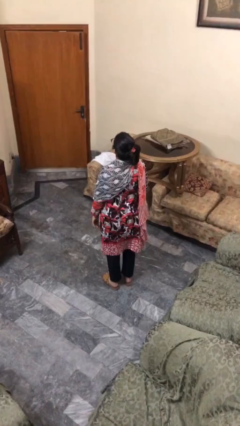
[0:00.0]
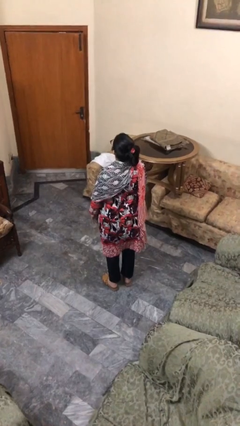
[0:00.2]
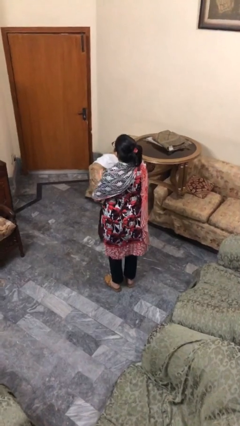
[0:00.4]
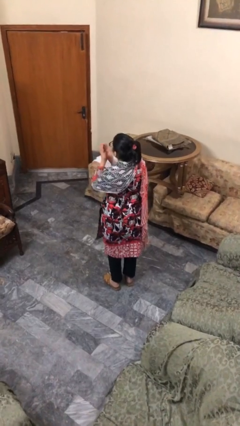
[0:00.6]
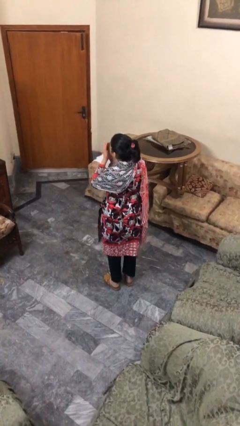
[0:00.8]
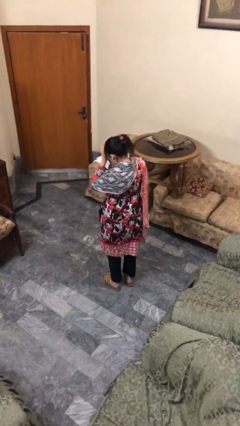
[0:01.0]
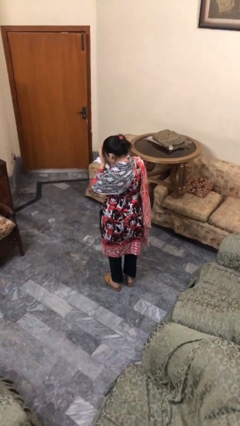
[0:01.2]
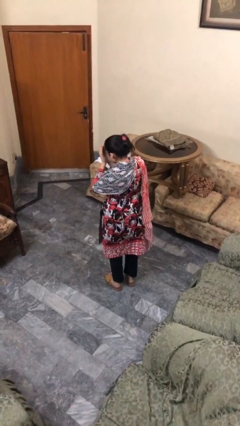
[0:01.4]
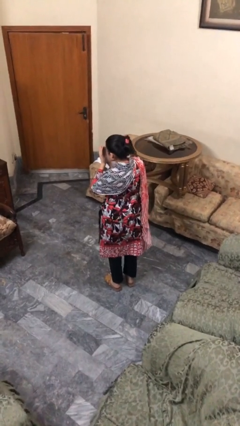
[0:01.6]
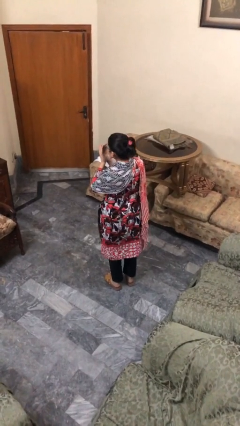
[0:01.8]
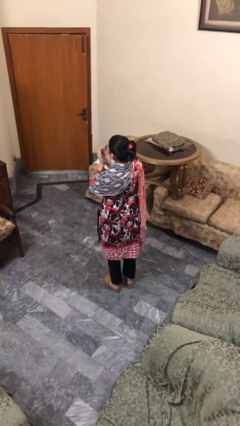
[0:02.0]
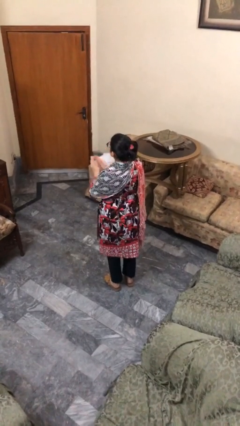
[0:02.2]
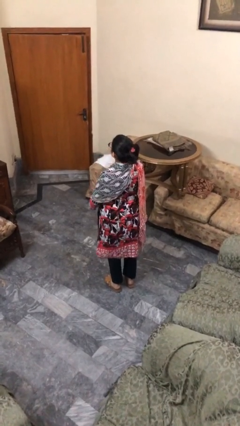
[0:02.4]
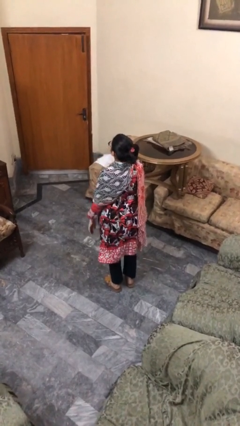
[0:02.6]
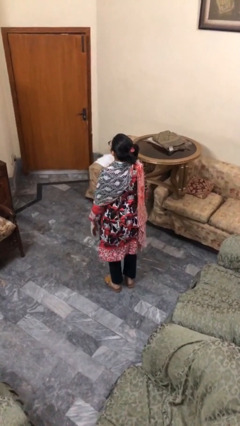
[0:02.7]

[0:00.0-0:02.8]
person sneezes into hand

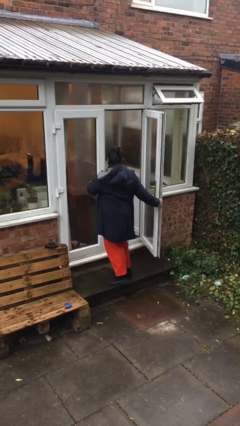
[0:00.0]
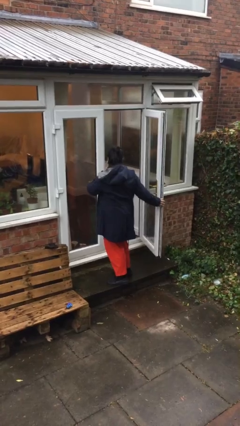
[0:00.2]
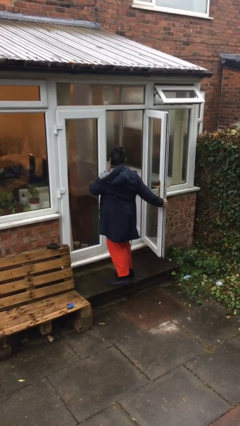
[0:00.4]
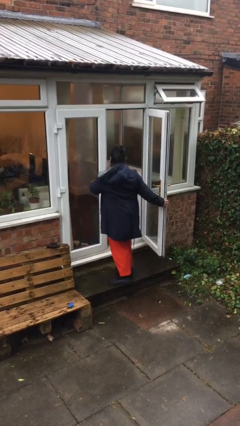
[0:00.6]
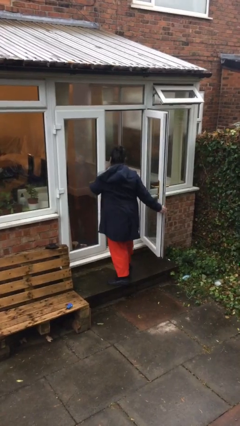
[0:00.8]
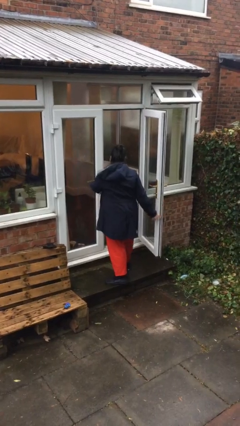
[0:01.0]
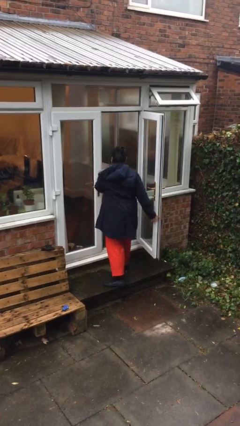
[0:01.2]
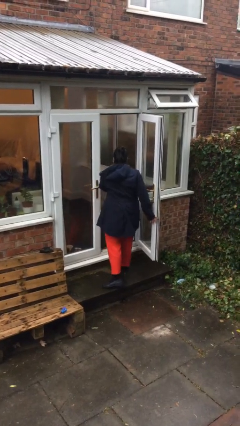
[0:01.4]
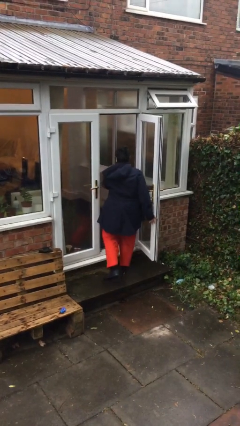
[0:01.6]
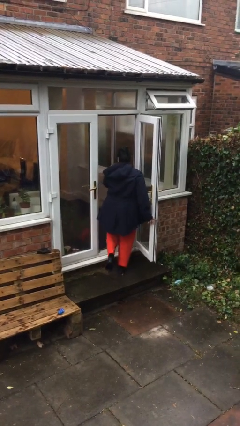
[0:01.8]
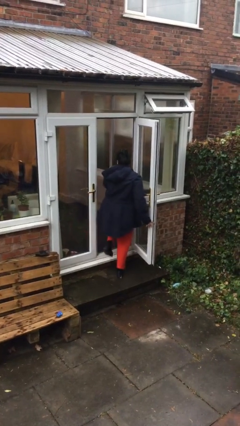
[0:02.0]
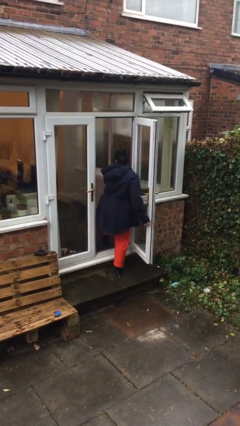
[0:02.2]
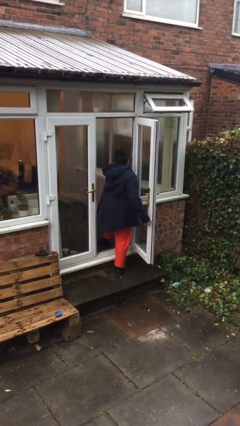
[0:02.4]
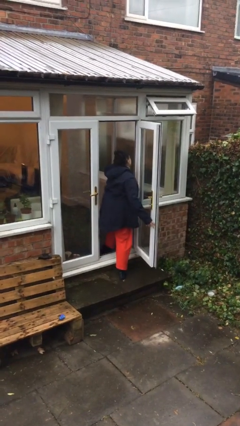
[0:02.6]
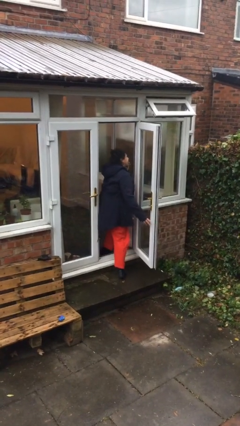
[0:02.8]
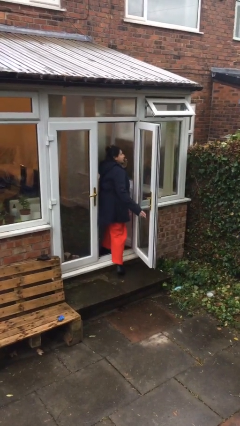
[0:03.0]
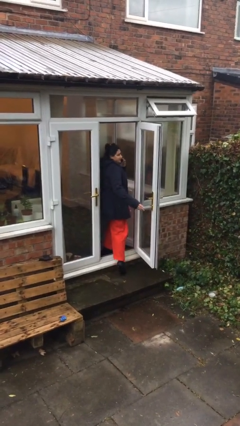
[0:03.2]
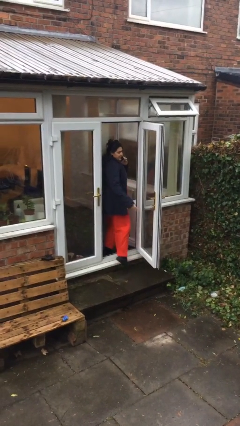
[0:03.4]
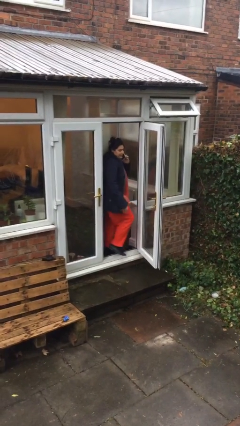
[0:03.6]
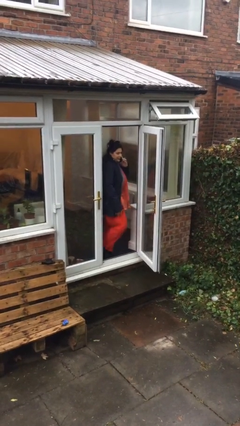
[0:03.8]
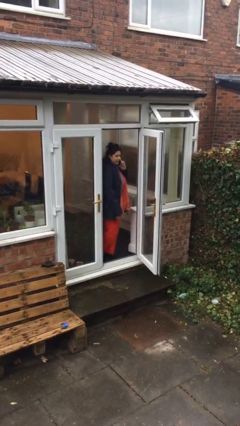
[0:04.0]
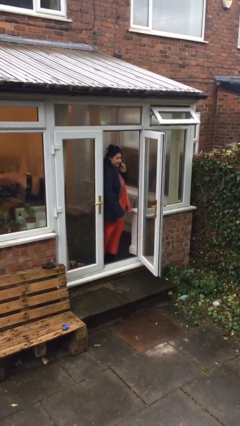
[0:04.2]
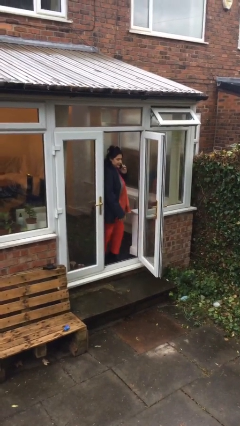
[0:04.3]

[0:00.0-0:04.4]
person exits scene through structure

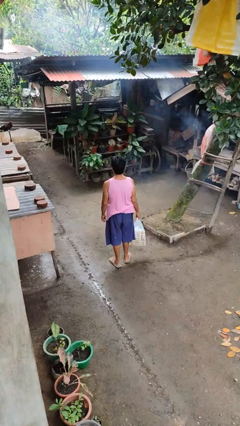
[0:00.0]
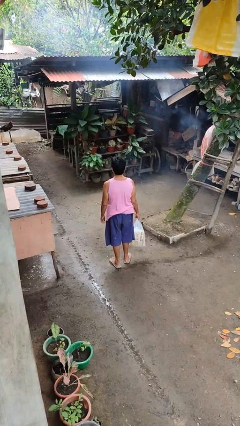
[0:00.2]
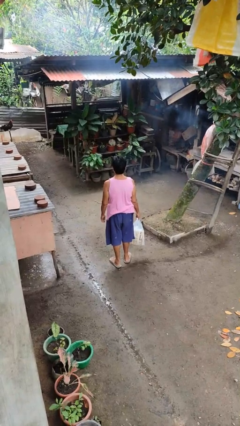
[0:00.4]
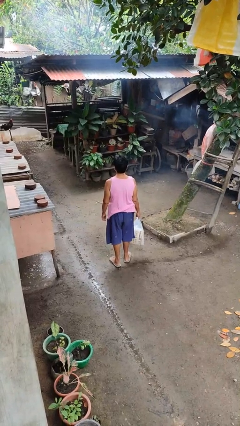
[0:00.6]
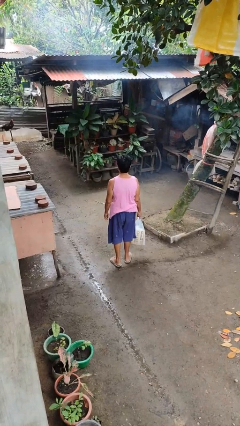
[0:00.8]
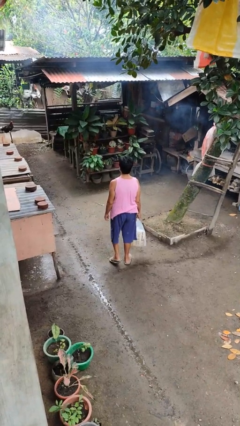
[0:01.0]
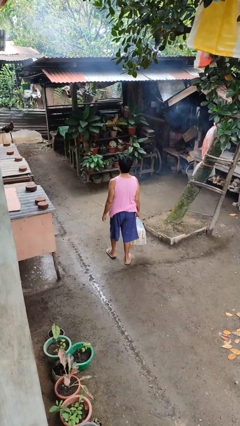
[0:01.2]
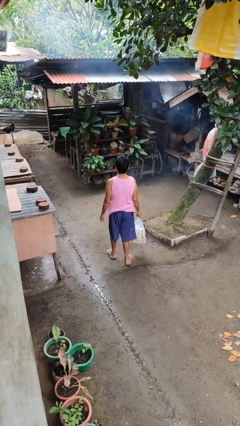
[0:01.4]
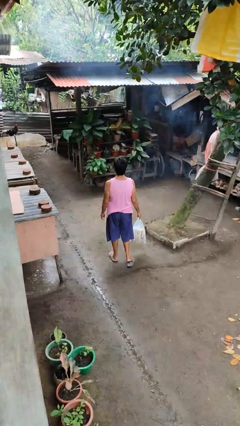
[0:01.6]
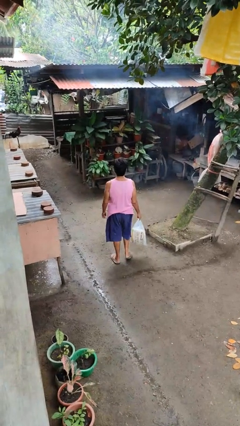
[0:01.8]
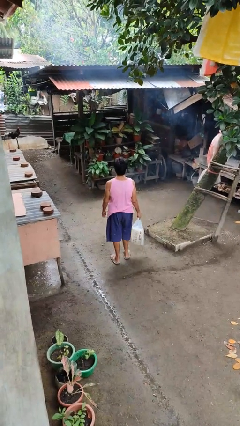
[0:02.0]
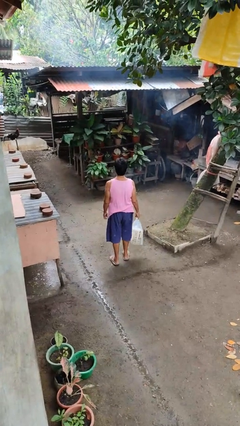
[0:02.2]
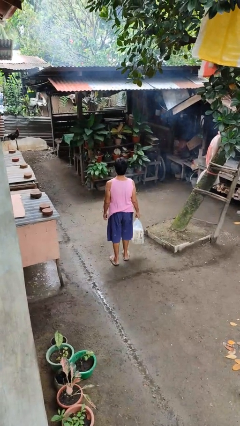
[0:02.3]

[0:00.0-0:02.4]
person carries groceries

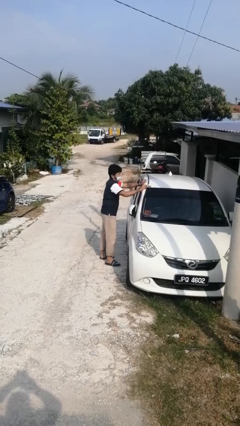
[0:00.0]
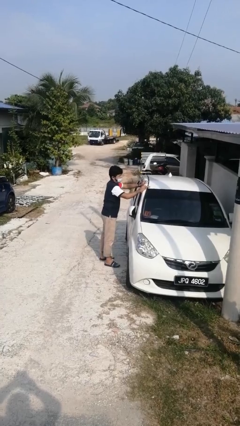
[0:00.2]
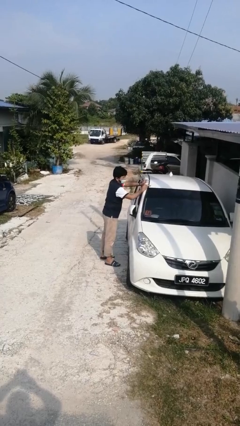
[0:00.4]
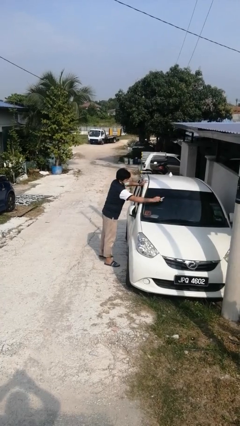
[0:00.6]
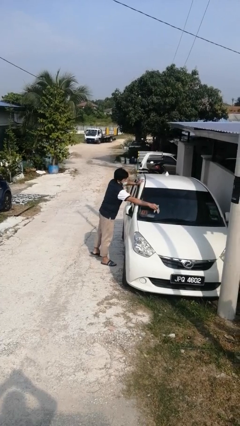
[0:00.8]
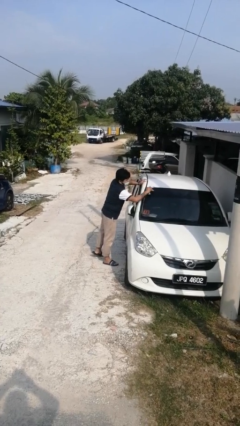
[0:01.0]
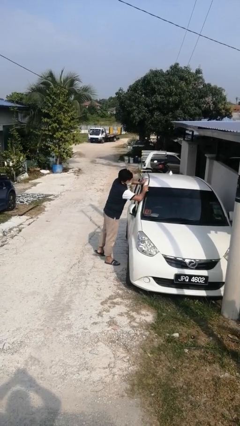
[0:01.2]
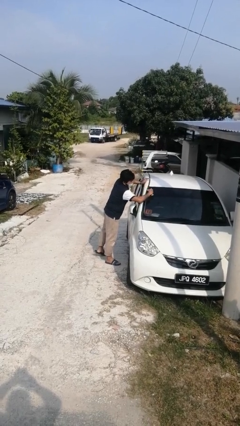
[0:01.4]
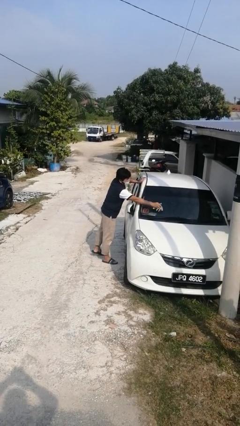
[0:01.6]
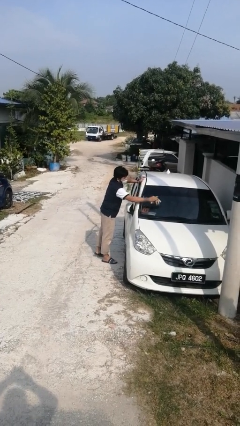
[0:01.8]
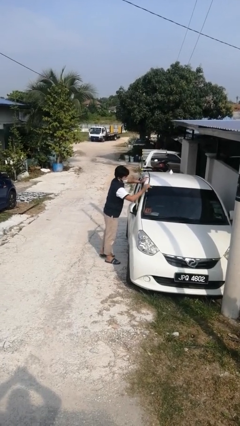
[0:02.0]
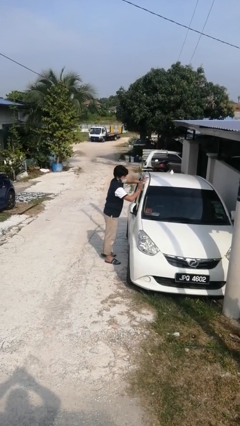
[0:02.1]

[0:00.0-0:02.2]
person polishes car with rag

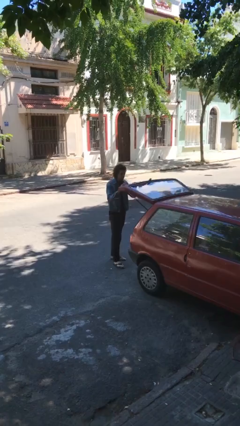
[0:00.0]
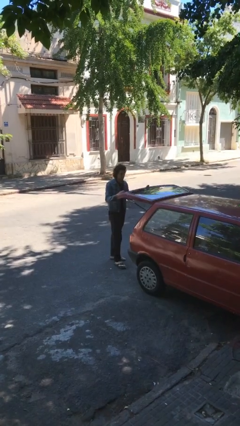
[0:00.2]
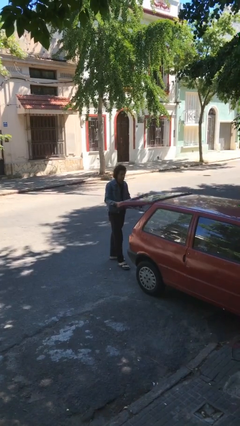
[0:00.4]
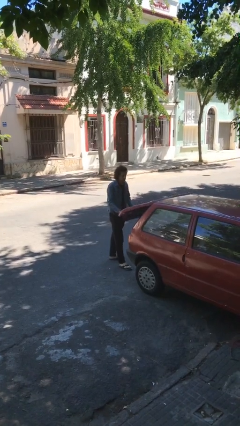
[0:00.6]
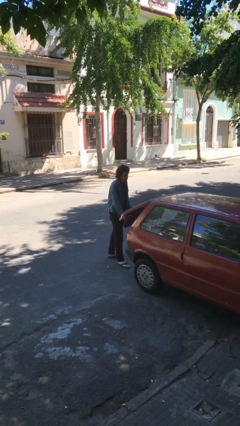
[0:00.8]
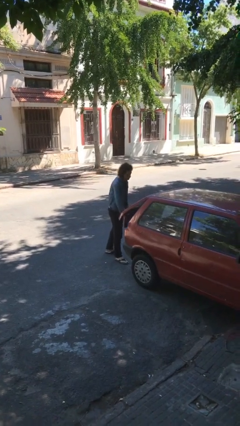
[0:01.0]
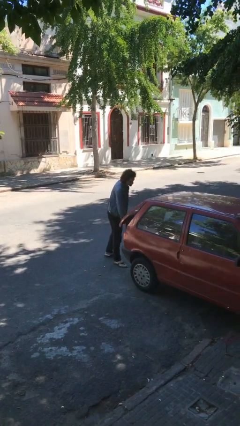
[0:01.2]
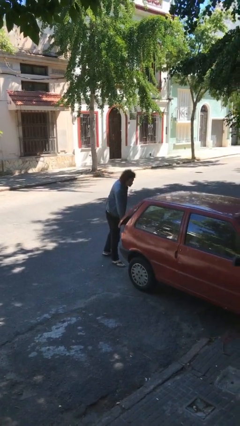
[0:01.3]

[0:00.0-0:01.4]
person closes car trunk

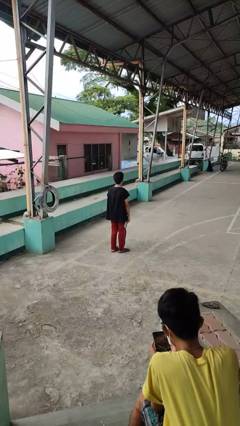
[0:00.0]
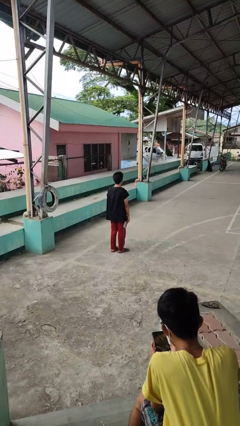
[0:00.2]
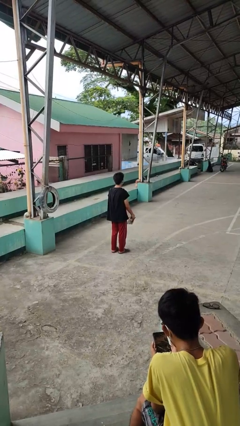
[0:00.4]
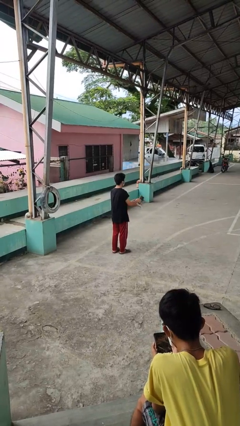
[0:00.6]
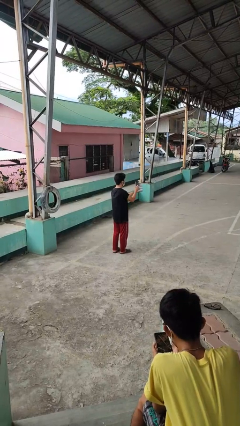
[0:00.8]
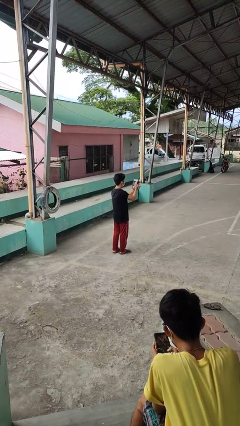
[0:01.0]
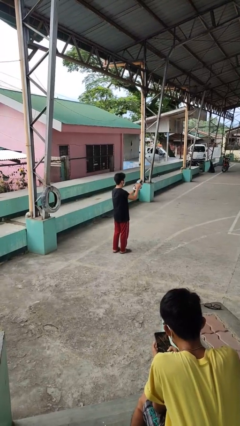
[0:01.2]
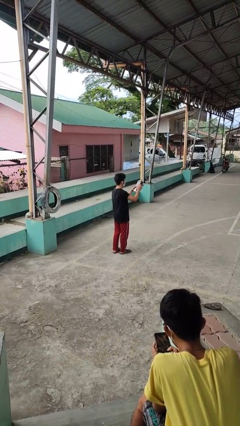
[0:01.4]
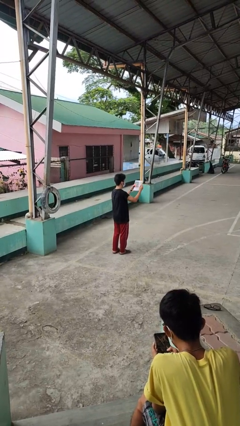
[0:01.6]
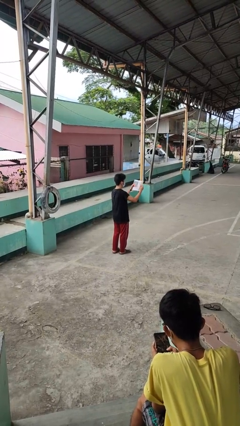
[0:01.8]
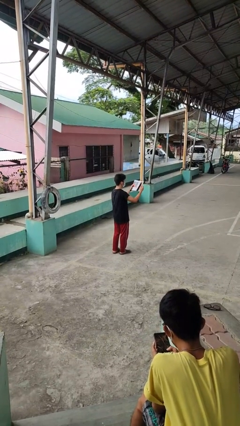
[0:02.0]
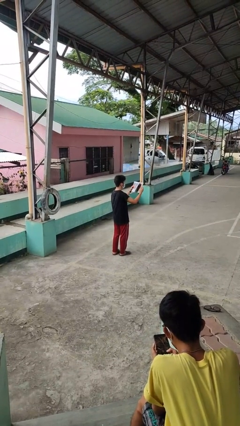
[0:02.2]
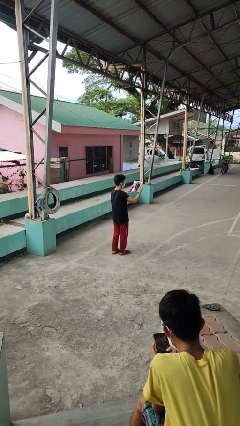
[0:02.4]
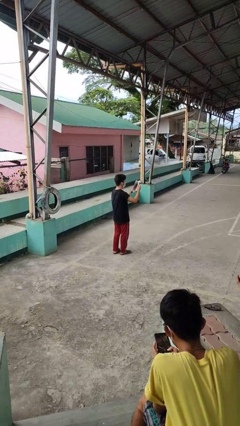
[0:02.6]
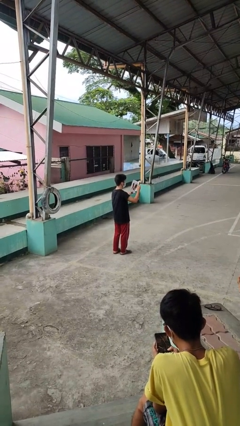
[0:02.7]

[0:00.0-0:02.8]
person reads magazine

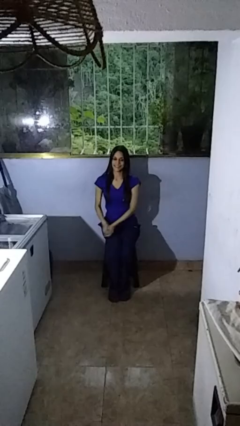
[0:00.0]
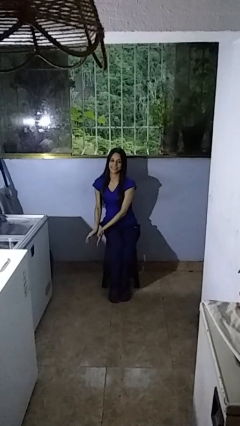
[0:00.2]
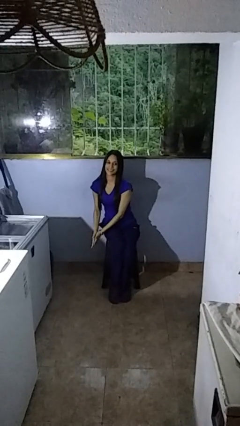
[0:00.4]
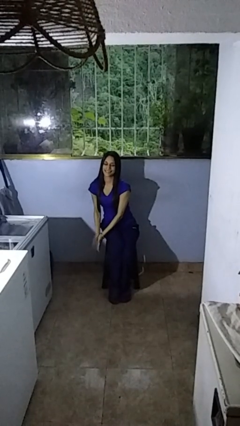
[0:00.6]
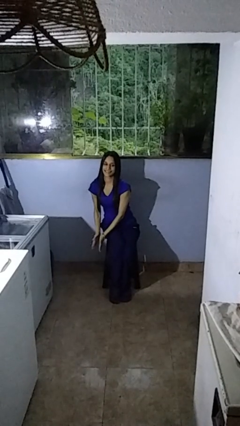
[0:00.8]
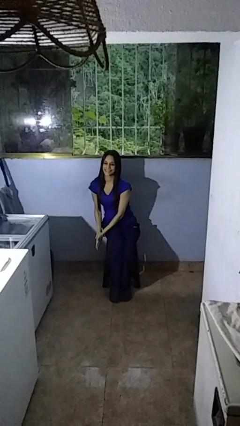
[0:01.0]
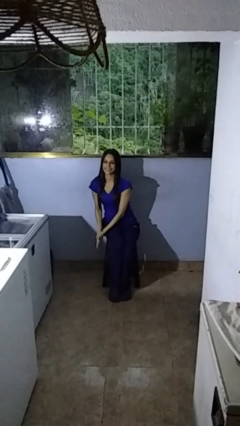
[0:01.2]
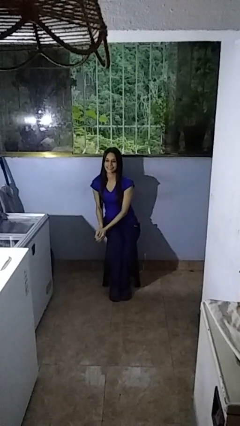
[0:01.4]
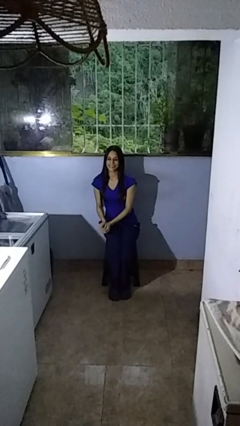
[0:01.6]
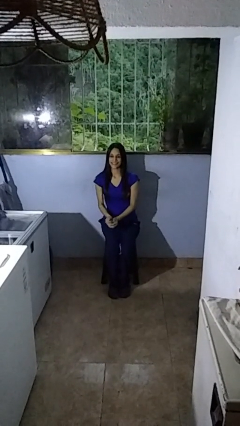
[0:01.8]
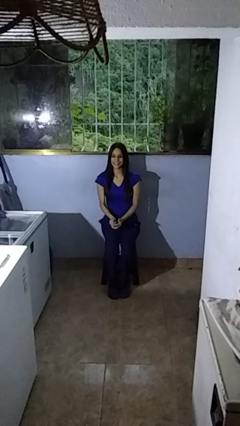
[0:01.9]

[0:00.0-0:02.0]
person claps hands
